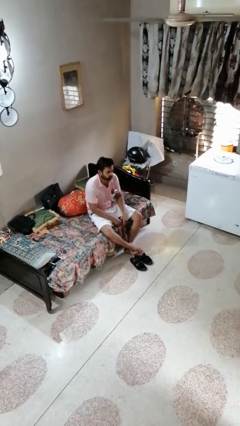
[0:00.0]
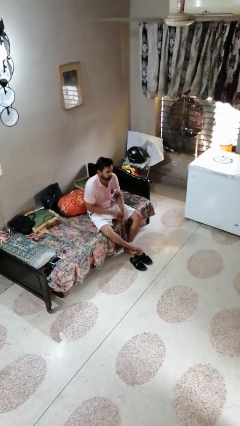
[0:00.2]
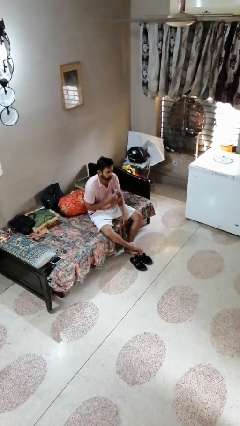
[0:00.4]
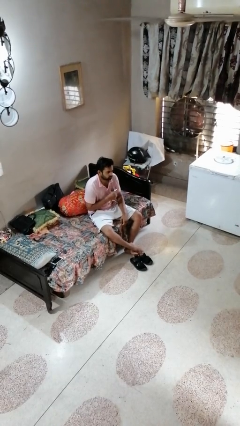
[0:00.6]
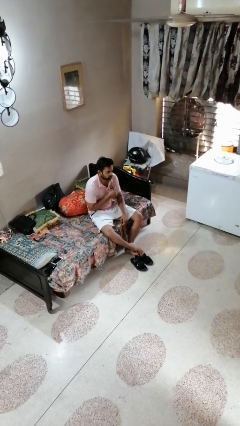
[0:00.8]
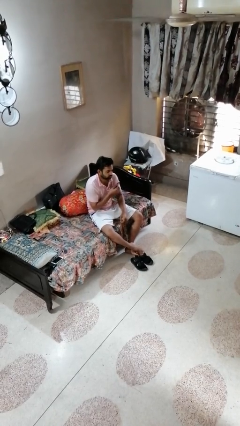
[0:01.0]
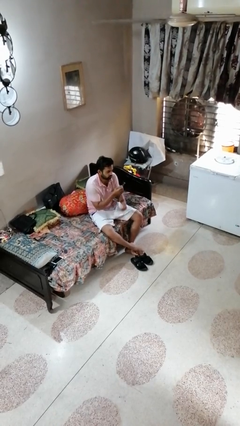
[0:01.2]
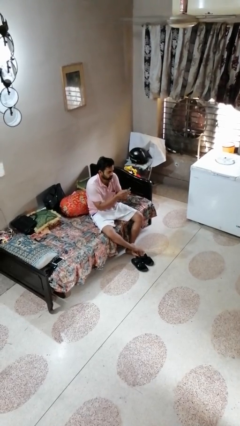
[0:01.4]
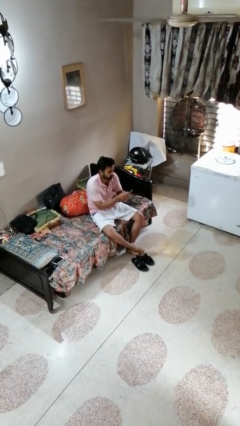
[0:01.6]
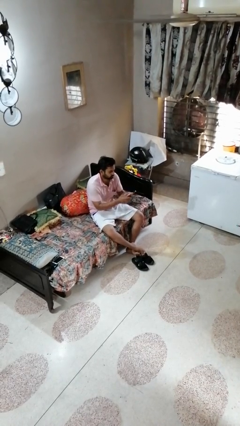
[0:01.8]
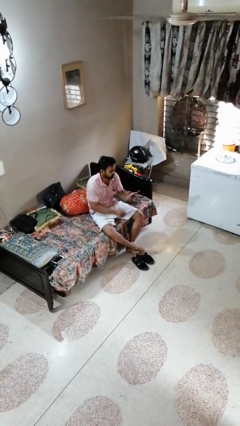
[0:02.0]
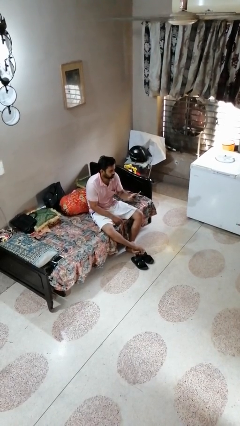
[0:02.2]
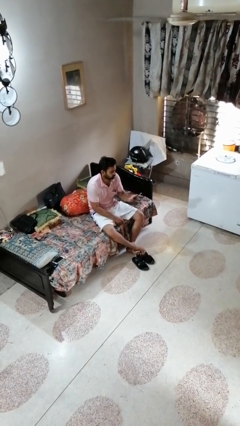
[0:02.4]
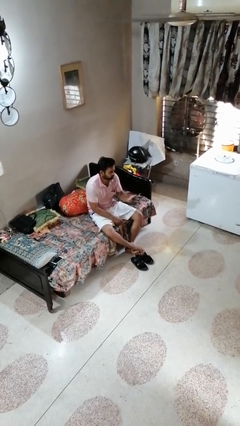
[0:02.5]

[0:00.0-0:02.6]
person takes phone from pocket

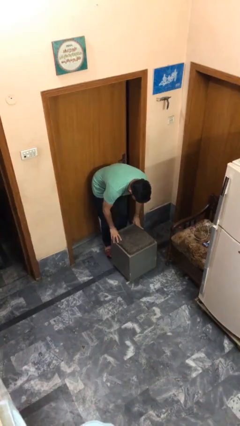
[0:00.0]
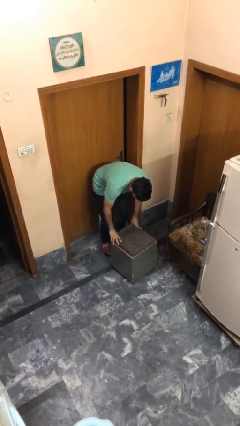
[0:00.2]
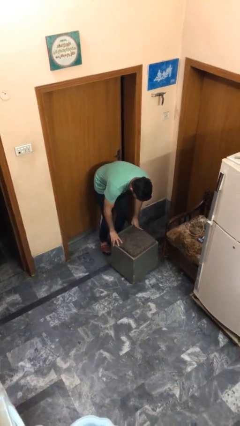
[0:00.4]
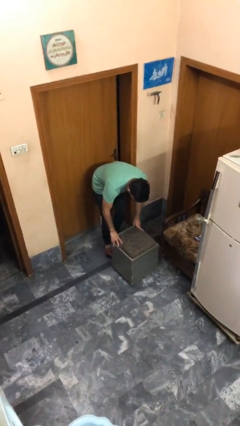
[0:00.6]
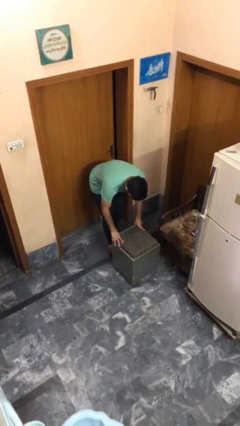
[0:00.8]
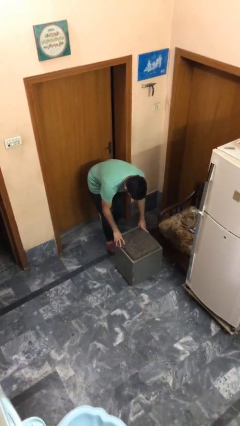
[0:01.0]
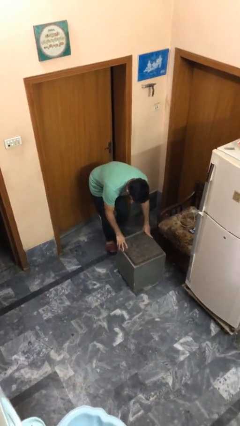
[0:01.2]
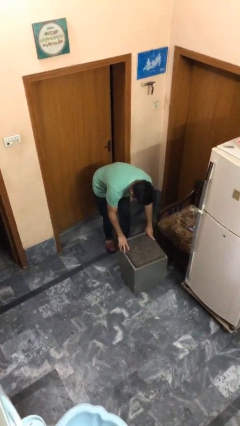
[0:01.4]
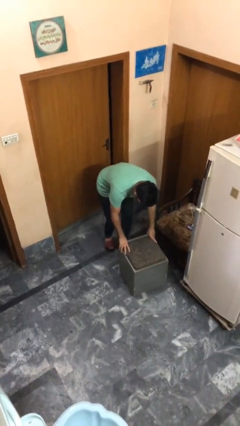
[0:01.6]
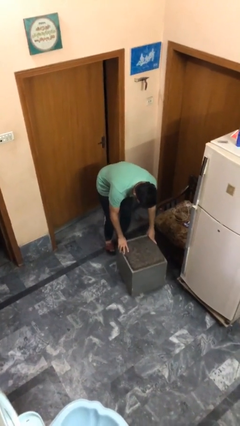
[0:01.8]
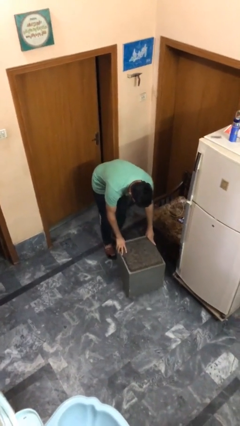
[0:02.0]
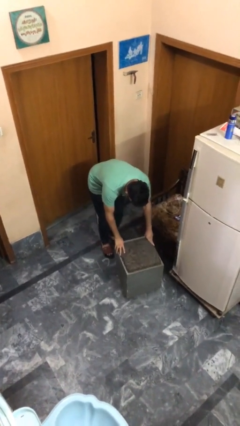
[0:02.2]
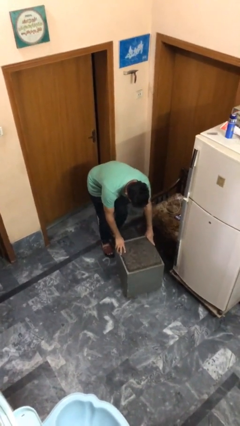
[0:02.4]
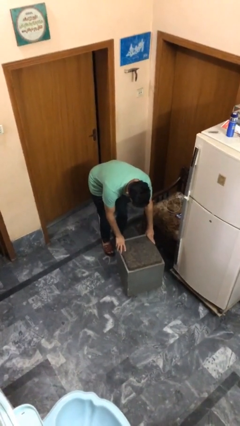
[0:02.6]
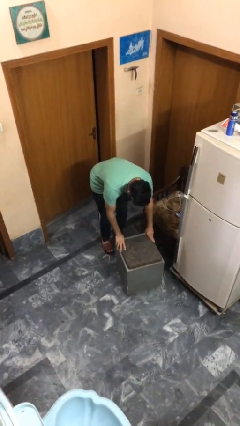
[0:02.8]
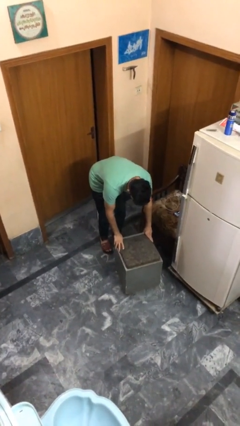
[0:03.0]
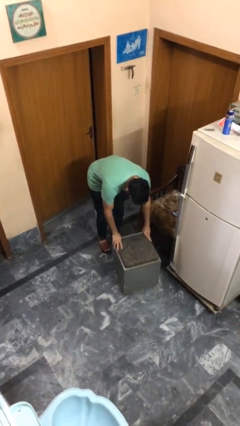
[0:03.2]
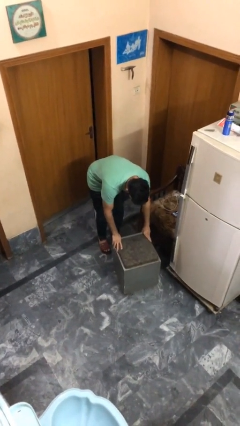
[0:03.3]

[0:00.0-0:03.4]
person pushes wheeled cart

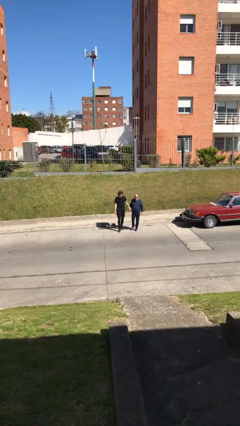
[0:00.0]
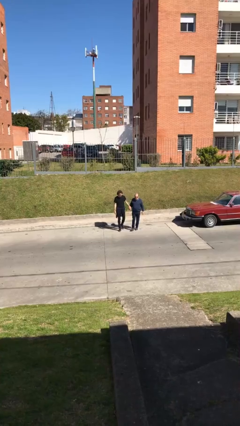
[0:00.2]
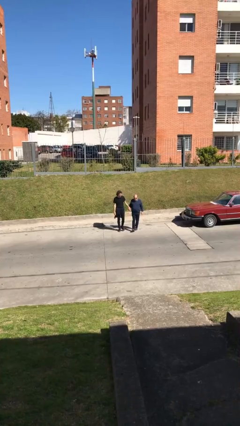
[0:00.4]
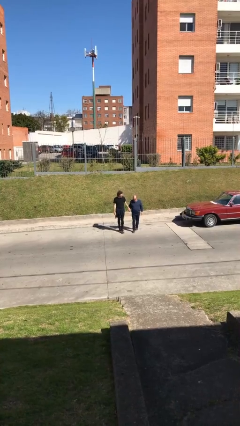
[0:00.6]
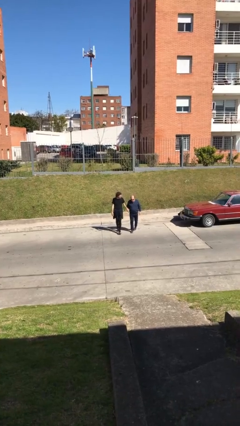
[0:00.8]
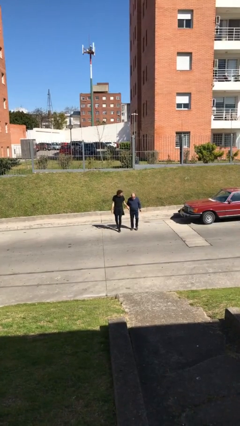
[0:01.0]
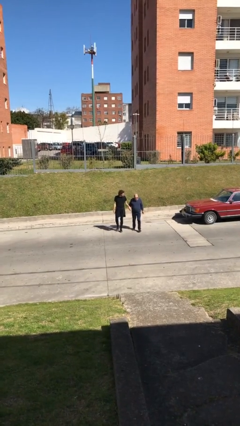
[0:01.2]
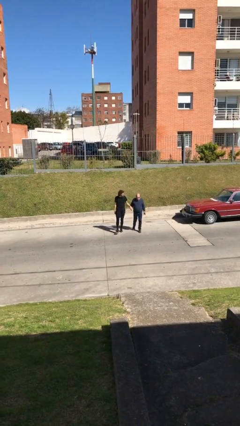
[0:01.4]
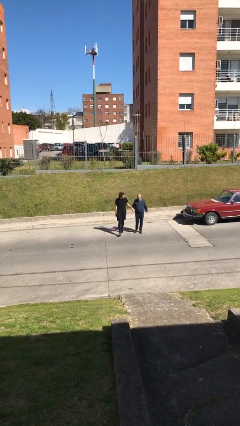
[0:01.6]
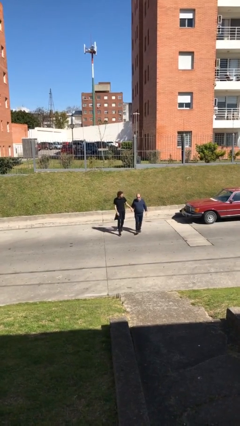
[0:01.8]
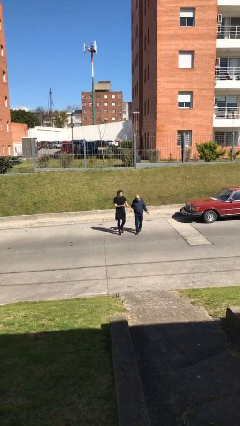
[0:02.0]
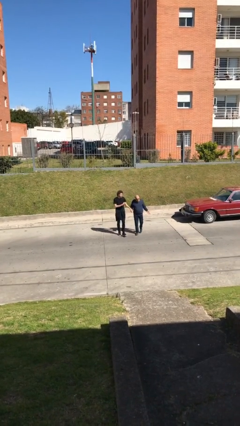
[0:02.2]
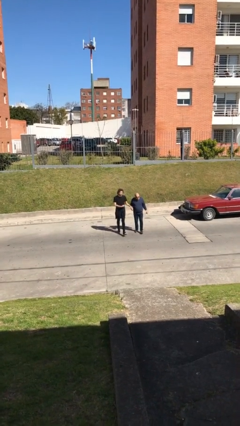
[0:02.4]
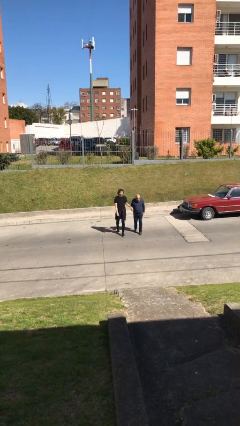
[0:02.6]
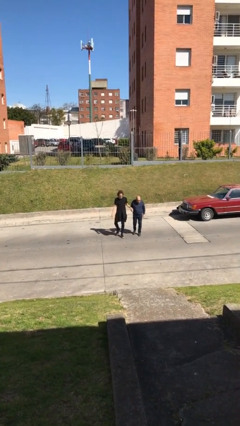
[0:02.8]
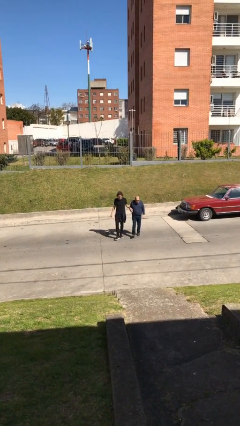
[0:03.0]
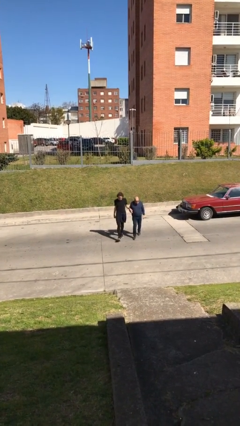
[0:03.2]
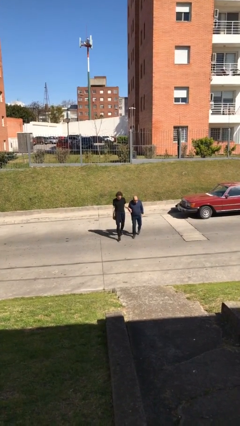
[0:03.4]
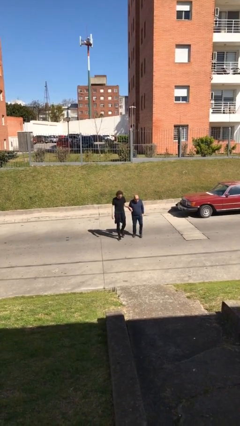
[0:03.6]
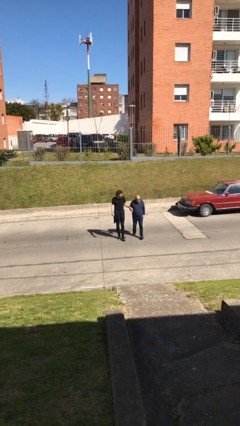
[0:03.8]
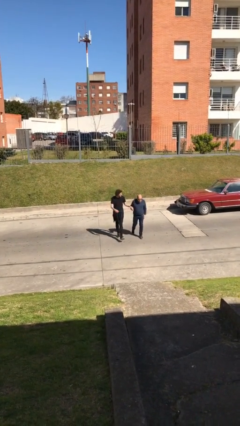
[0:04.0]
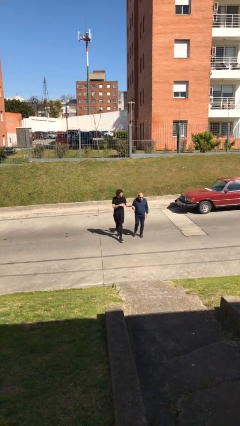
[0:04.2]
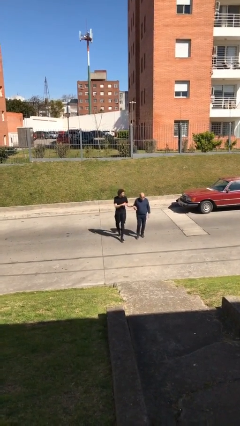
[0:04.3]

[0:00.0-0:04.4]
person holds hand

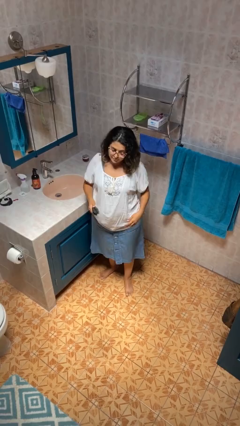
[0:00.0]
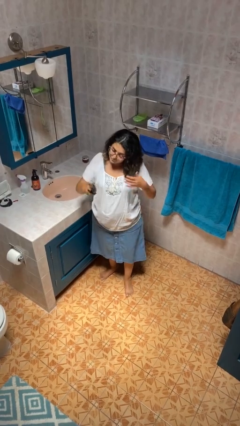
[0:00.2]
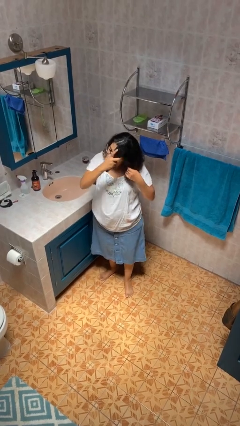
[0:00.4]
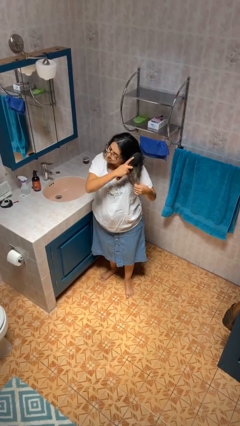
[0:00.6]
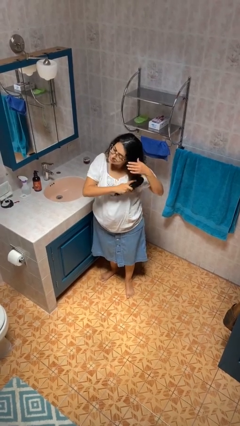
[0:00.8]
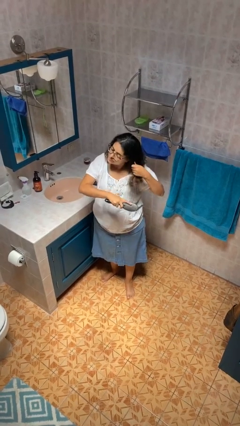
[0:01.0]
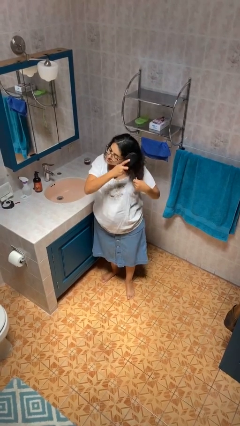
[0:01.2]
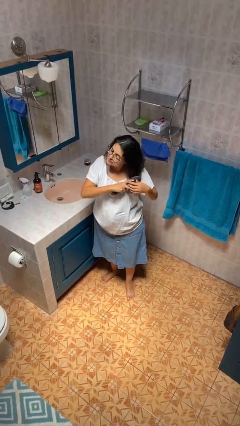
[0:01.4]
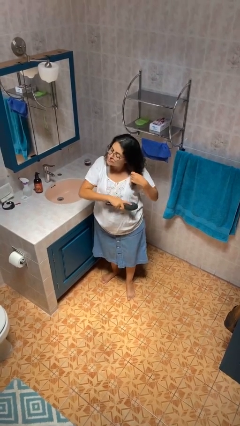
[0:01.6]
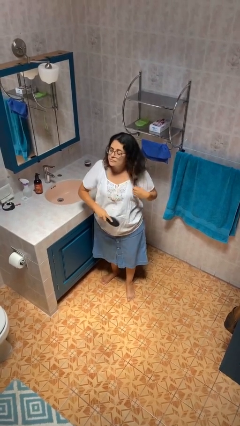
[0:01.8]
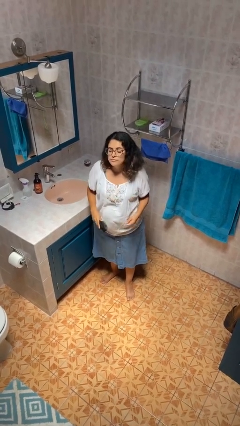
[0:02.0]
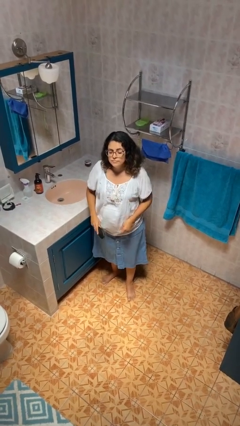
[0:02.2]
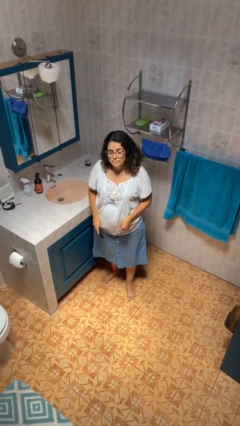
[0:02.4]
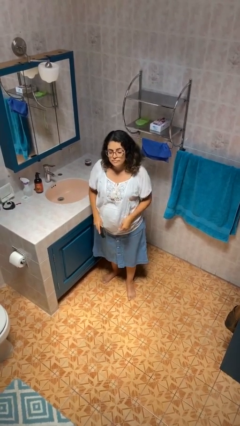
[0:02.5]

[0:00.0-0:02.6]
person brushes hair

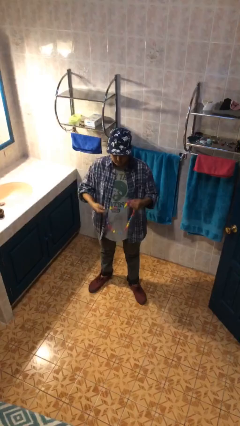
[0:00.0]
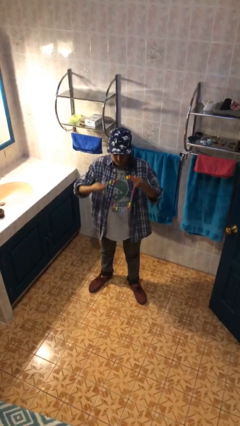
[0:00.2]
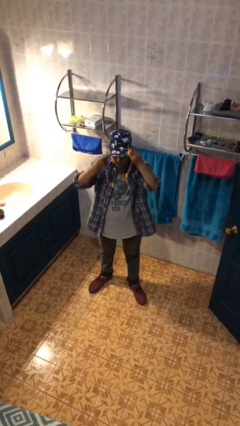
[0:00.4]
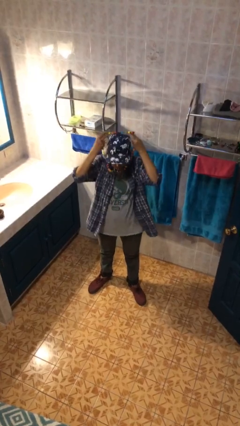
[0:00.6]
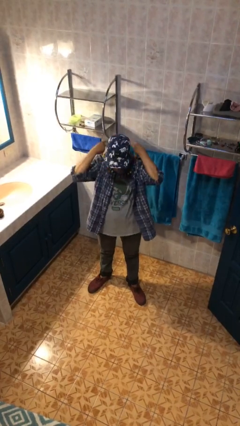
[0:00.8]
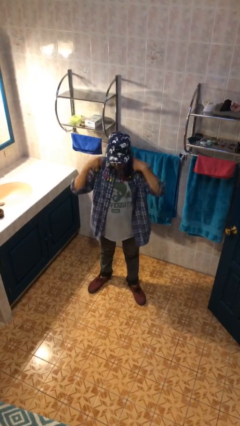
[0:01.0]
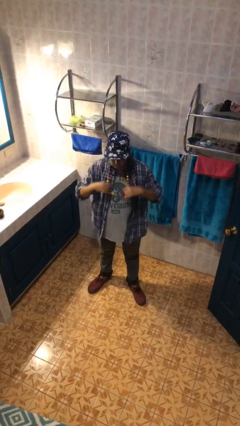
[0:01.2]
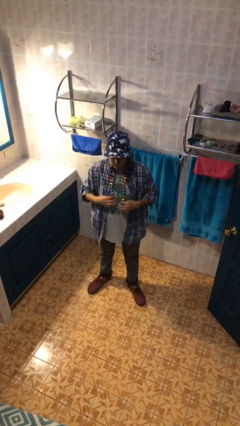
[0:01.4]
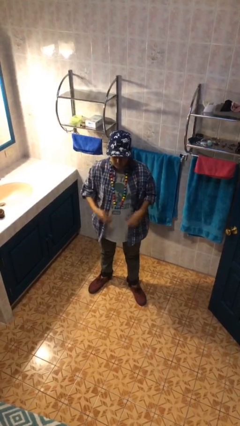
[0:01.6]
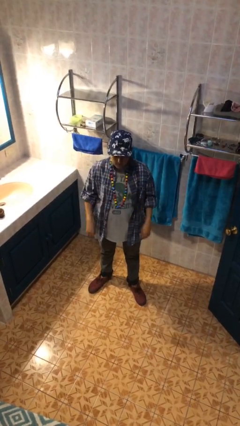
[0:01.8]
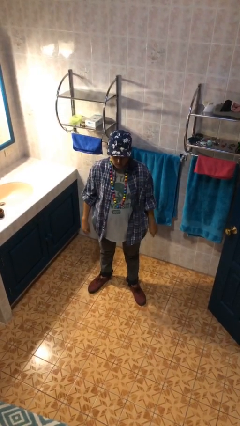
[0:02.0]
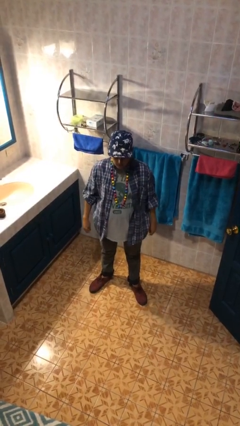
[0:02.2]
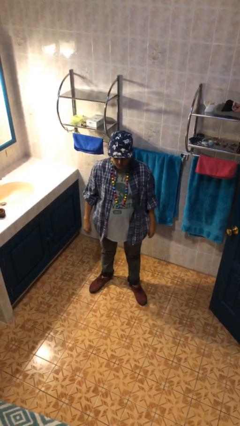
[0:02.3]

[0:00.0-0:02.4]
person puts on necklace

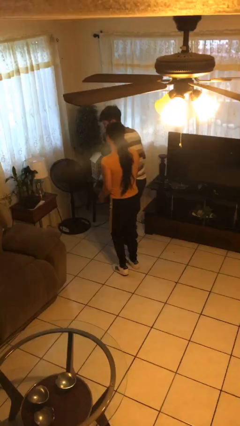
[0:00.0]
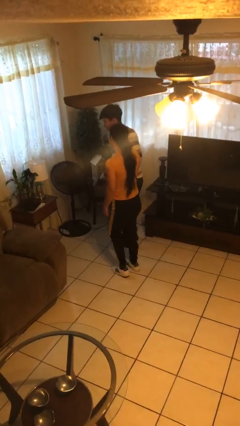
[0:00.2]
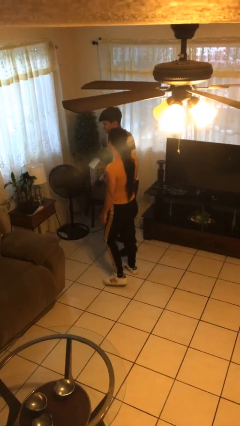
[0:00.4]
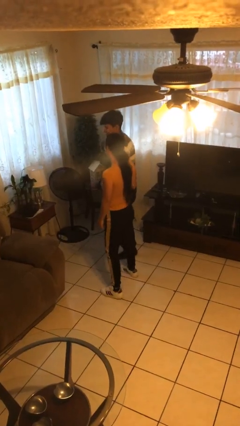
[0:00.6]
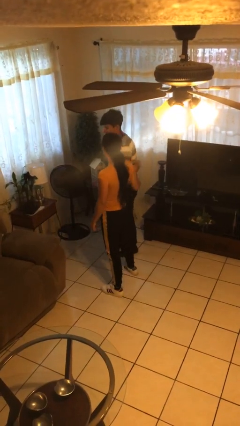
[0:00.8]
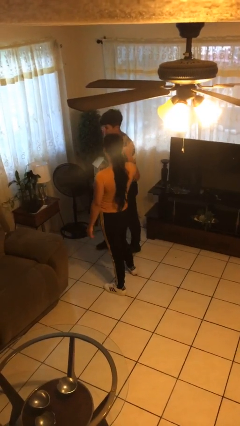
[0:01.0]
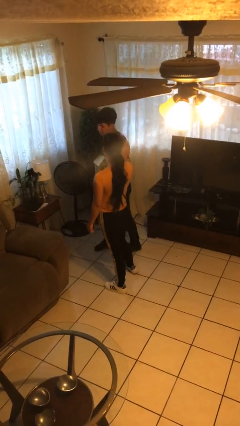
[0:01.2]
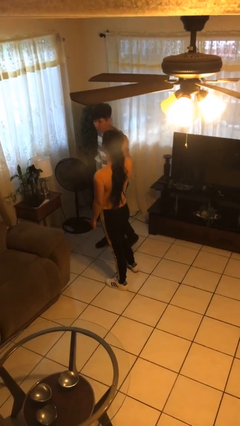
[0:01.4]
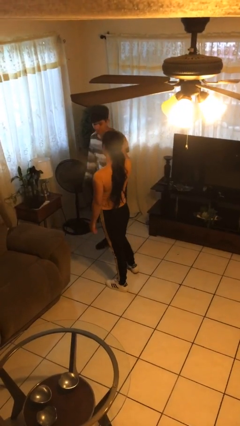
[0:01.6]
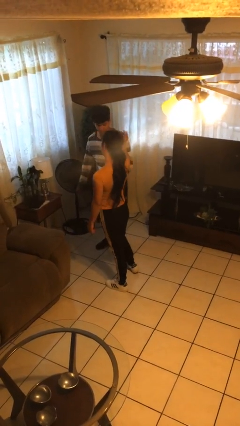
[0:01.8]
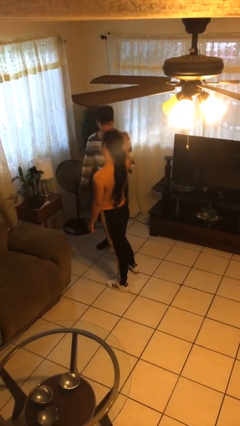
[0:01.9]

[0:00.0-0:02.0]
person bumps into person
